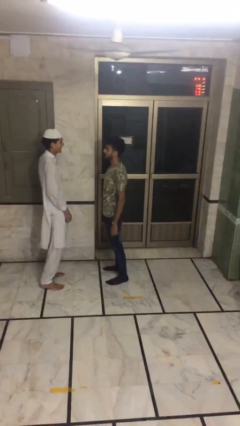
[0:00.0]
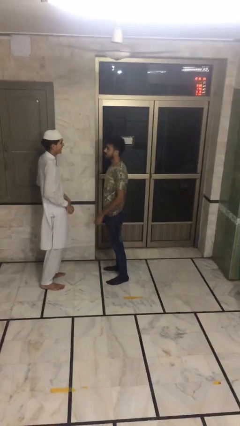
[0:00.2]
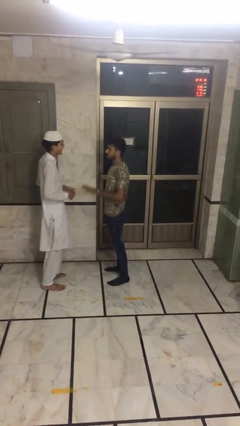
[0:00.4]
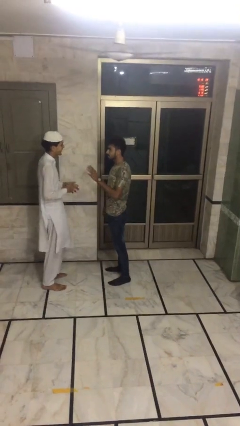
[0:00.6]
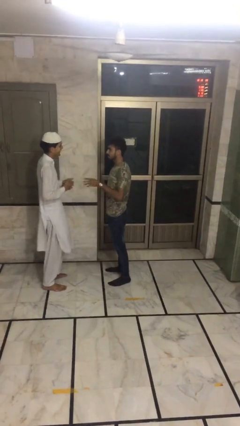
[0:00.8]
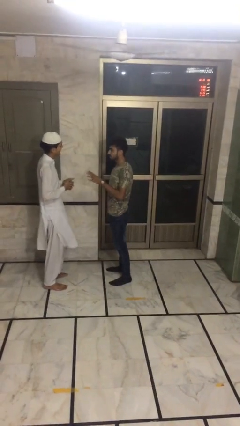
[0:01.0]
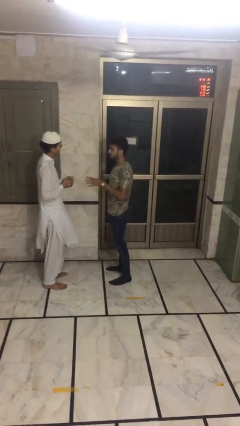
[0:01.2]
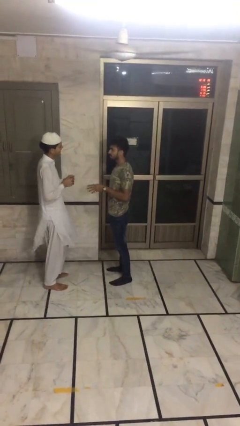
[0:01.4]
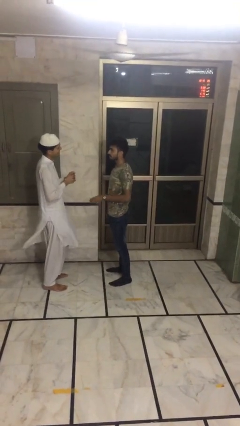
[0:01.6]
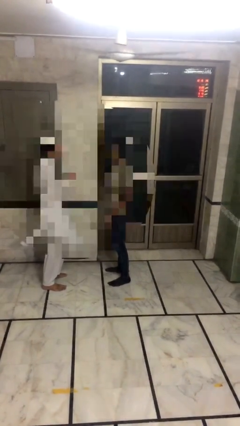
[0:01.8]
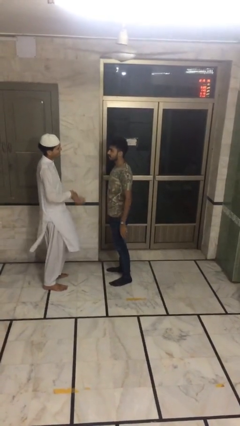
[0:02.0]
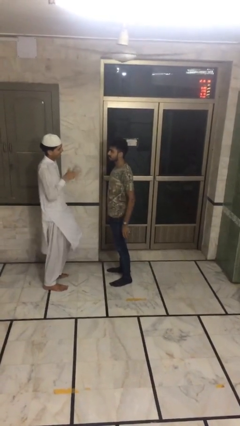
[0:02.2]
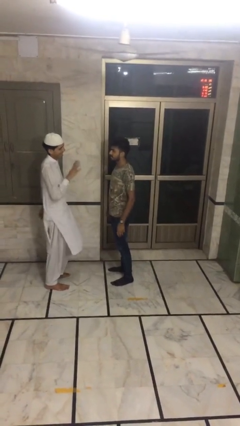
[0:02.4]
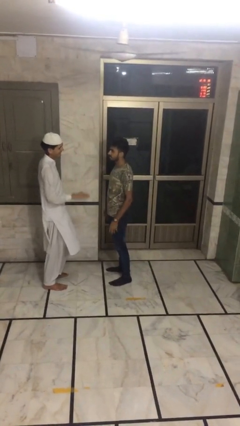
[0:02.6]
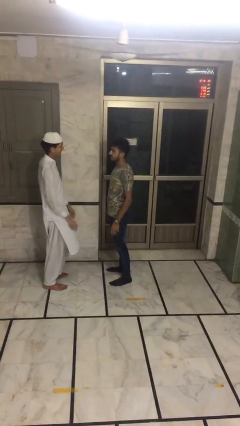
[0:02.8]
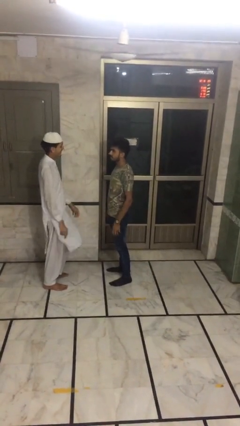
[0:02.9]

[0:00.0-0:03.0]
person talks to person

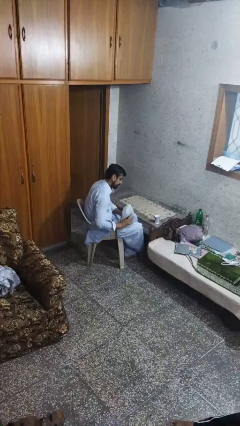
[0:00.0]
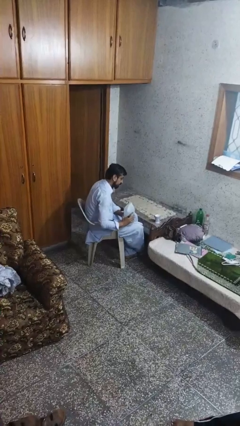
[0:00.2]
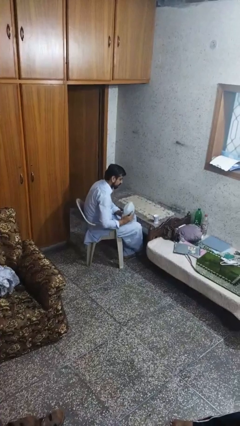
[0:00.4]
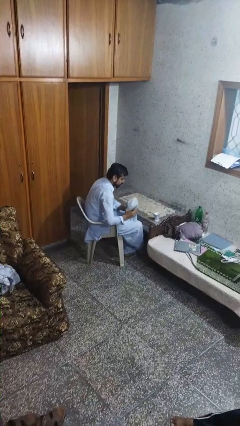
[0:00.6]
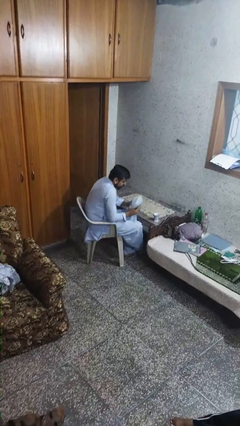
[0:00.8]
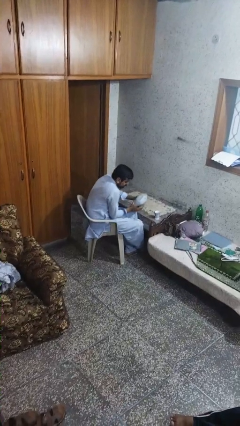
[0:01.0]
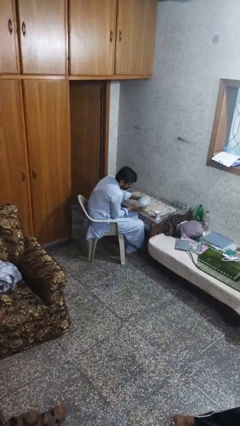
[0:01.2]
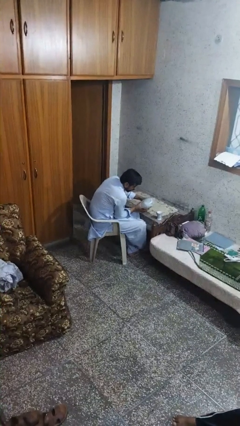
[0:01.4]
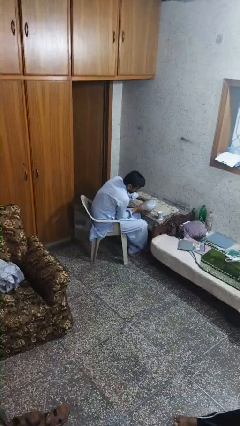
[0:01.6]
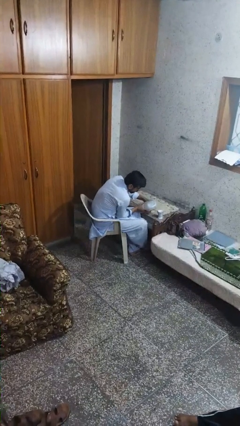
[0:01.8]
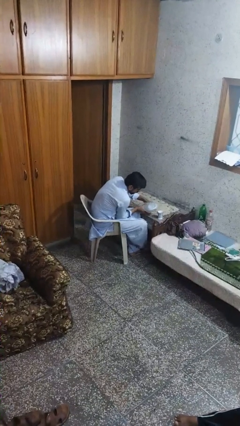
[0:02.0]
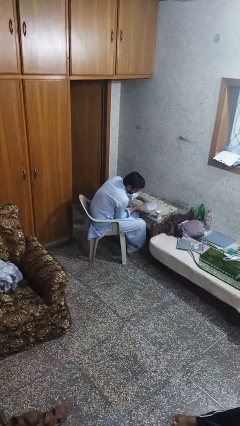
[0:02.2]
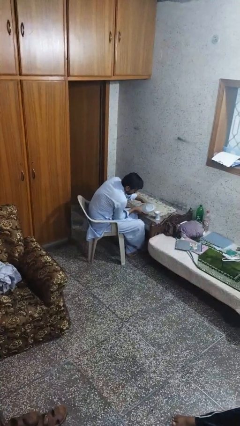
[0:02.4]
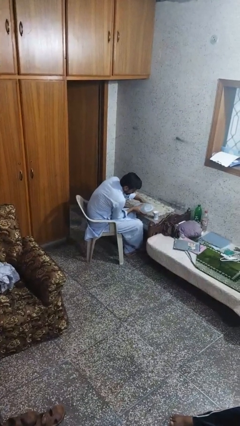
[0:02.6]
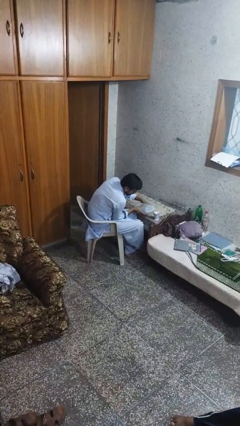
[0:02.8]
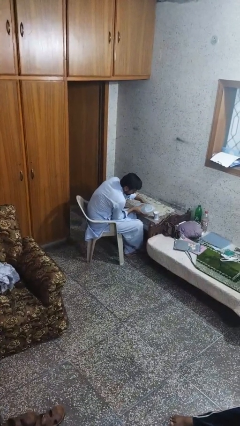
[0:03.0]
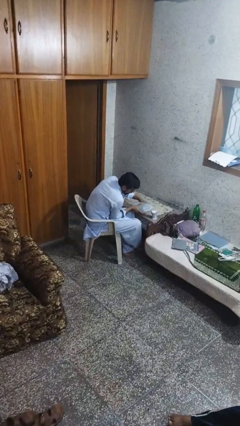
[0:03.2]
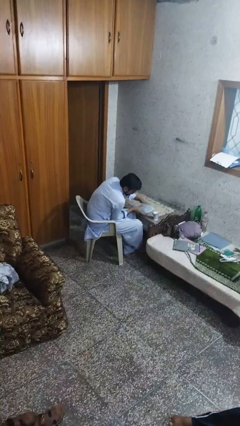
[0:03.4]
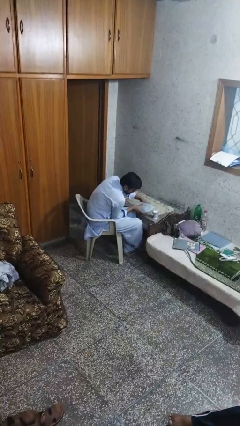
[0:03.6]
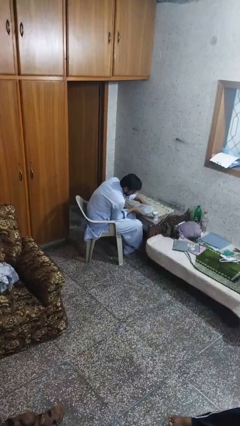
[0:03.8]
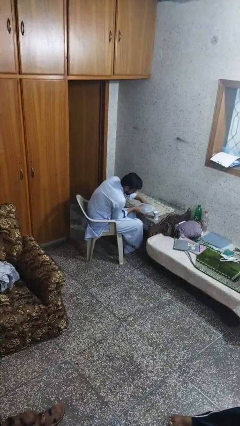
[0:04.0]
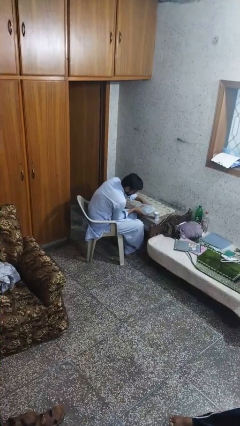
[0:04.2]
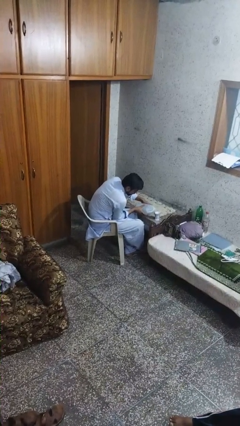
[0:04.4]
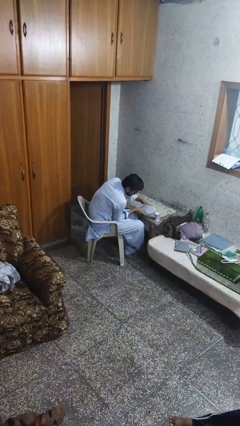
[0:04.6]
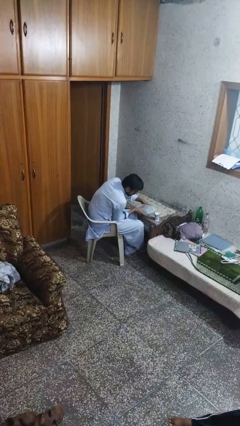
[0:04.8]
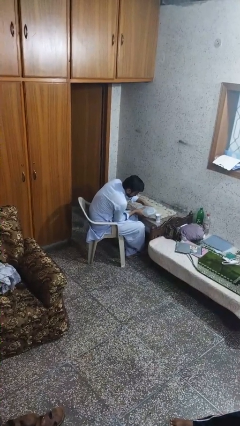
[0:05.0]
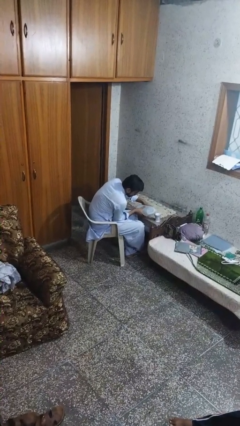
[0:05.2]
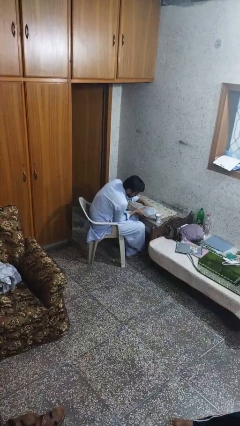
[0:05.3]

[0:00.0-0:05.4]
person pours liquid into cup

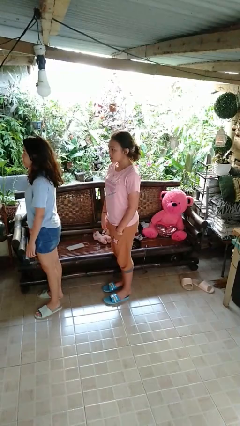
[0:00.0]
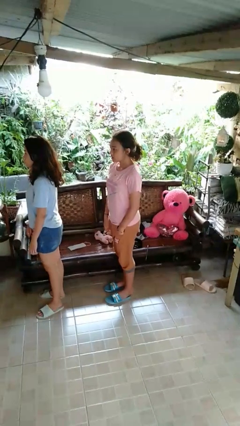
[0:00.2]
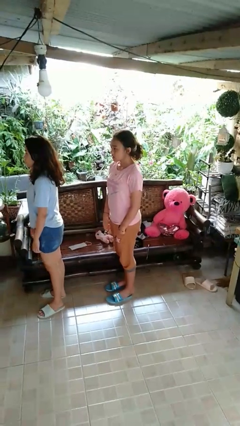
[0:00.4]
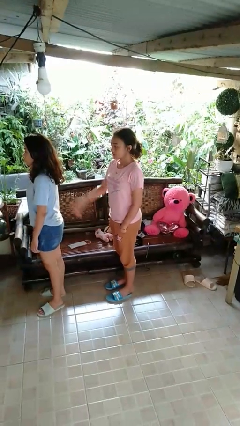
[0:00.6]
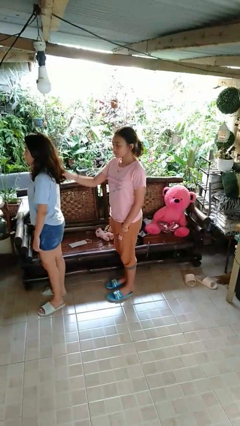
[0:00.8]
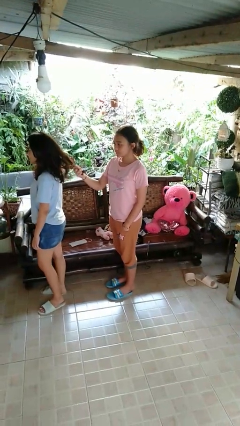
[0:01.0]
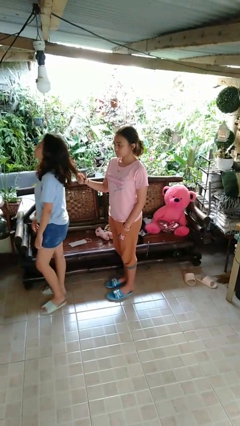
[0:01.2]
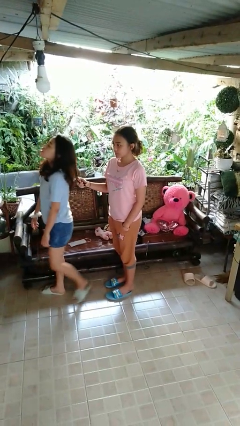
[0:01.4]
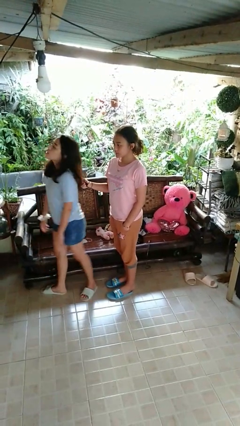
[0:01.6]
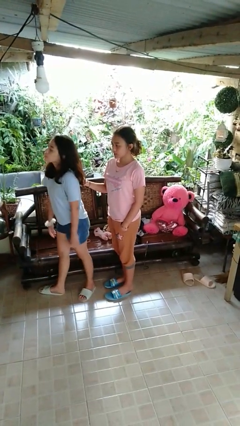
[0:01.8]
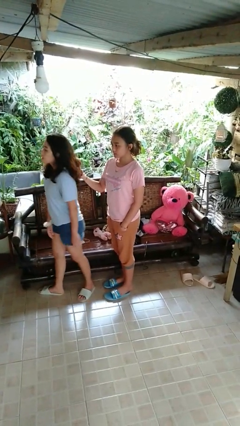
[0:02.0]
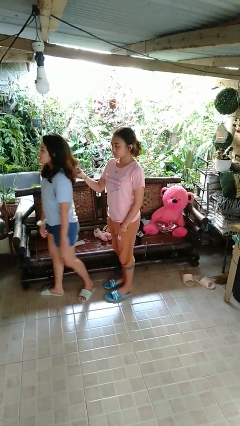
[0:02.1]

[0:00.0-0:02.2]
person grabs person by hair

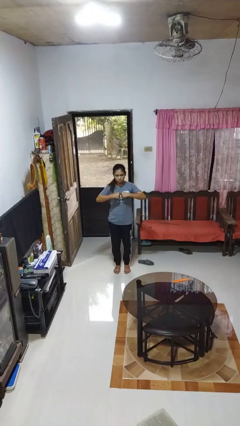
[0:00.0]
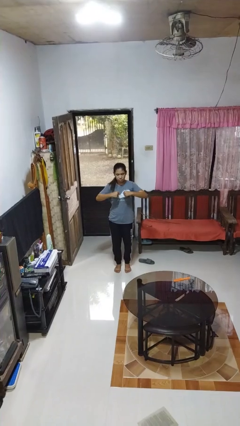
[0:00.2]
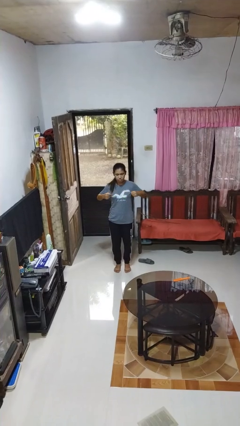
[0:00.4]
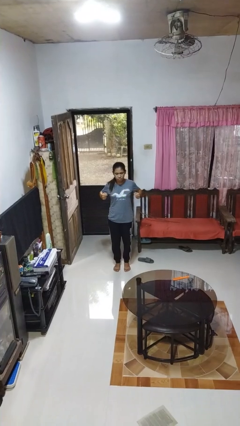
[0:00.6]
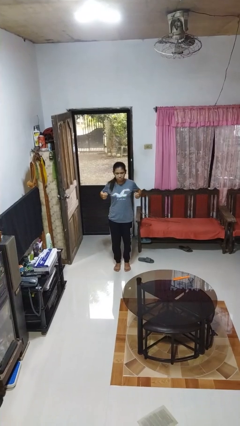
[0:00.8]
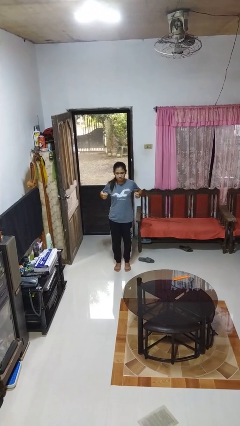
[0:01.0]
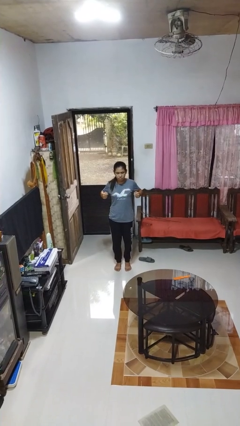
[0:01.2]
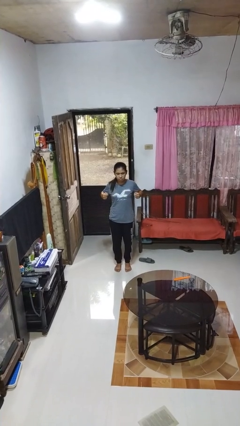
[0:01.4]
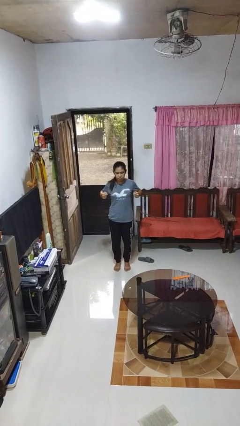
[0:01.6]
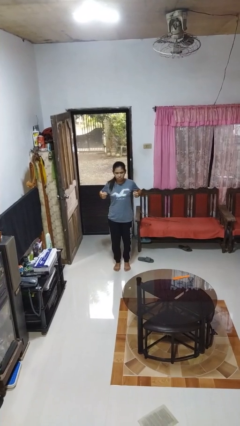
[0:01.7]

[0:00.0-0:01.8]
person gestures zoom in

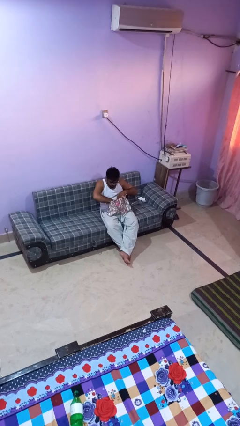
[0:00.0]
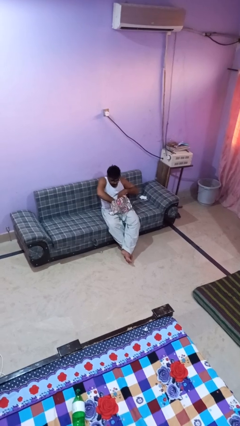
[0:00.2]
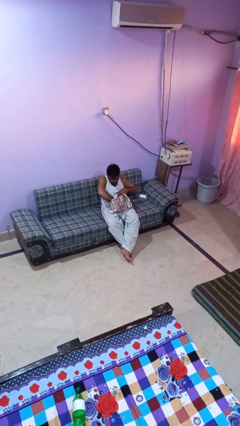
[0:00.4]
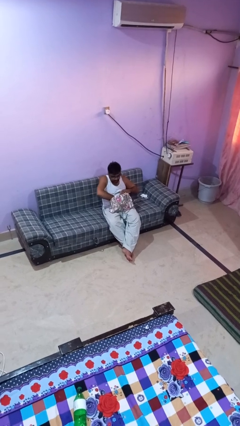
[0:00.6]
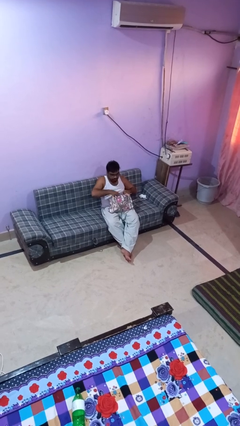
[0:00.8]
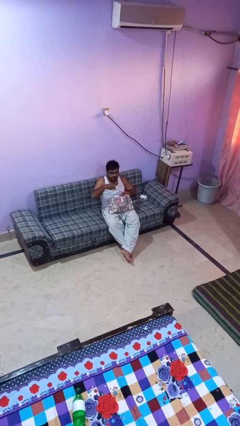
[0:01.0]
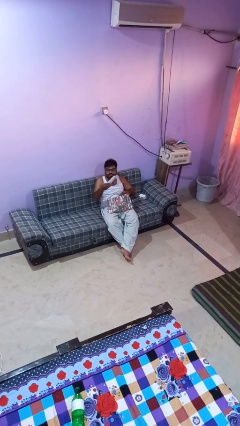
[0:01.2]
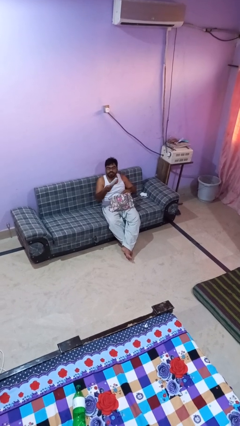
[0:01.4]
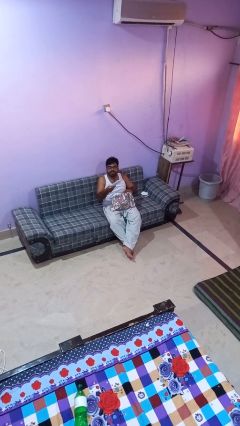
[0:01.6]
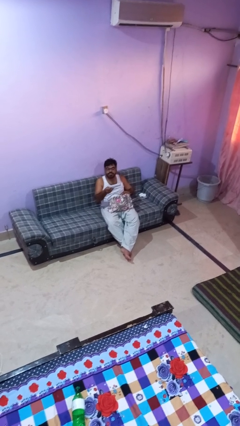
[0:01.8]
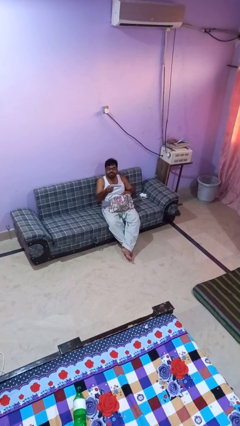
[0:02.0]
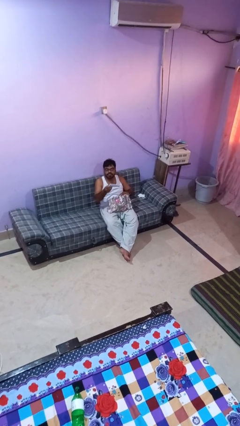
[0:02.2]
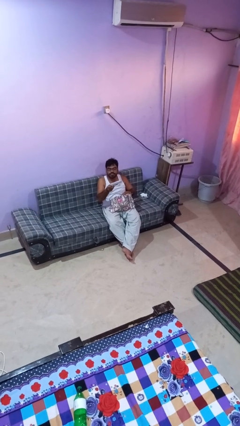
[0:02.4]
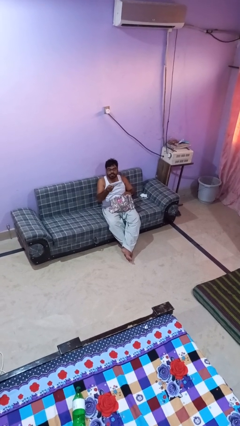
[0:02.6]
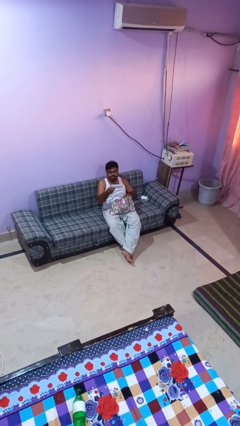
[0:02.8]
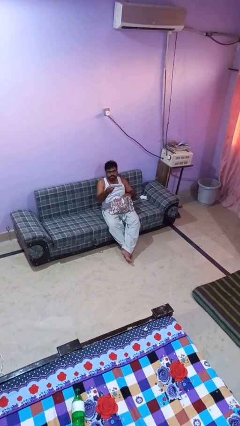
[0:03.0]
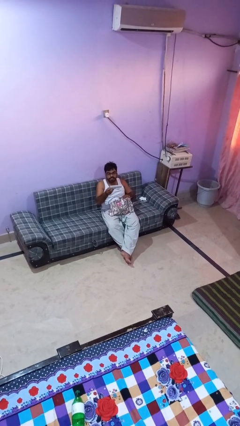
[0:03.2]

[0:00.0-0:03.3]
person takes object from purse

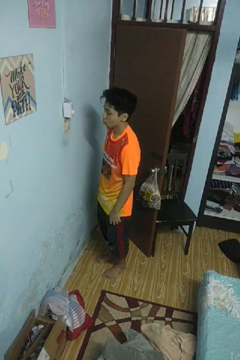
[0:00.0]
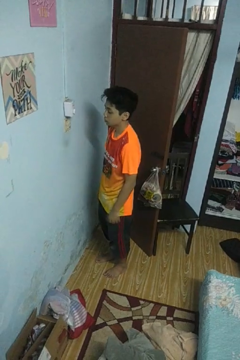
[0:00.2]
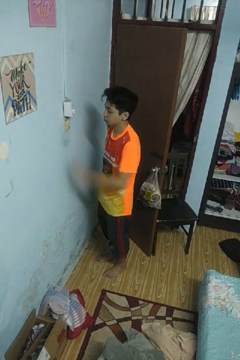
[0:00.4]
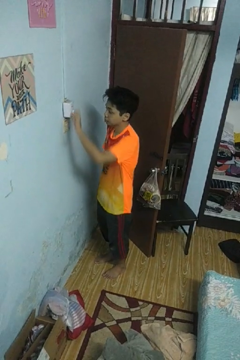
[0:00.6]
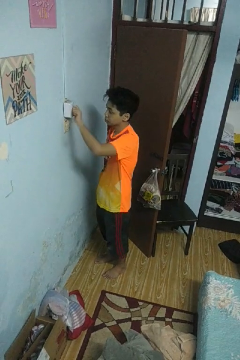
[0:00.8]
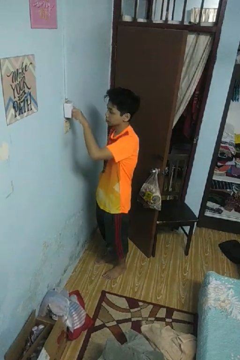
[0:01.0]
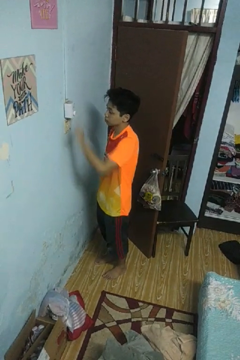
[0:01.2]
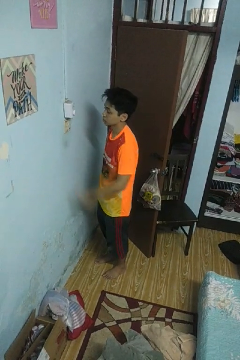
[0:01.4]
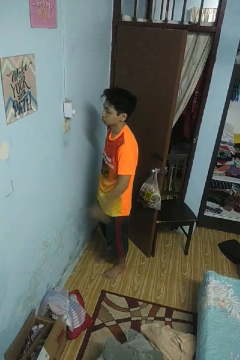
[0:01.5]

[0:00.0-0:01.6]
person adjusts thermostat

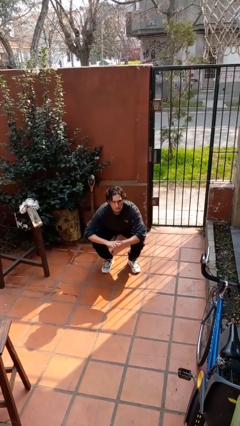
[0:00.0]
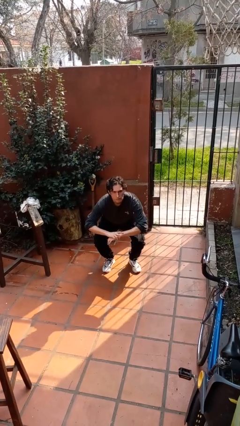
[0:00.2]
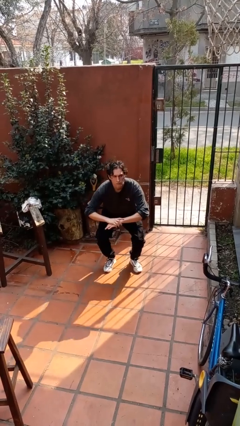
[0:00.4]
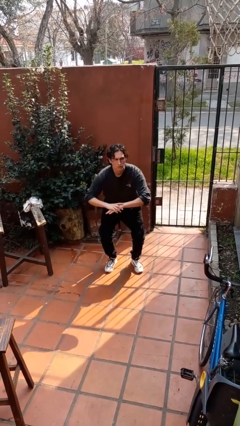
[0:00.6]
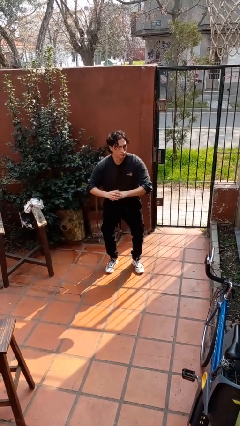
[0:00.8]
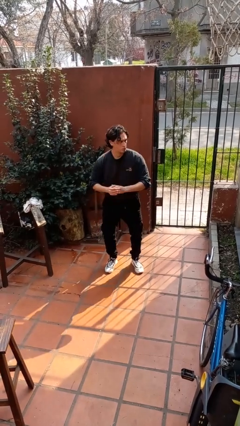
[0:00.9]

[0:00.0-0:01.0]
person stands up
